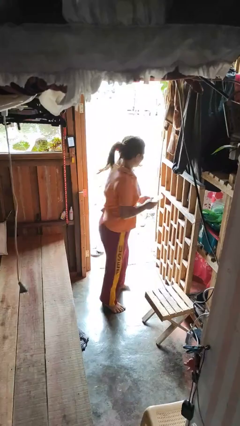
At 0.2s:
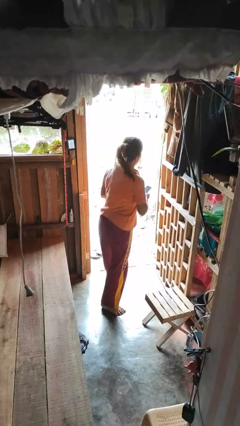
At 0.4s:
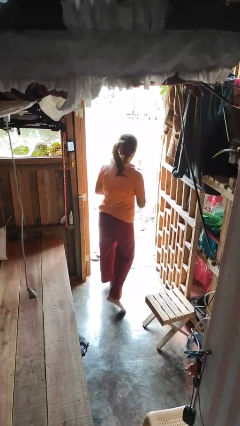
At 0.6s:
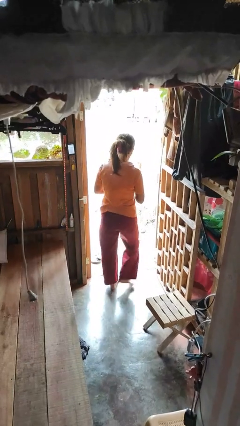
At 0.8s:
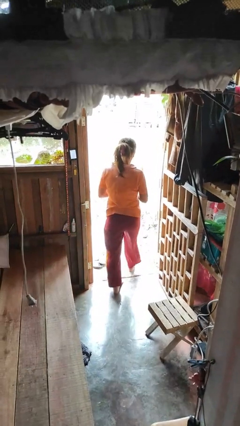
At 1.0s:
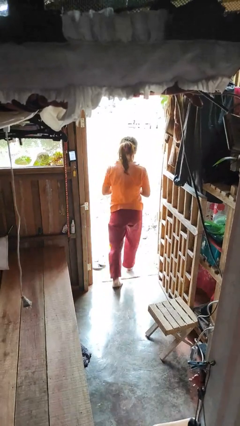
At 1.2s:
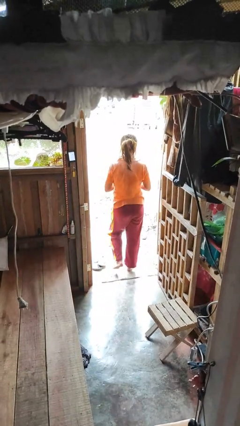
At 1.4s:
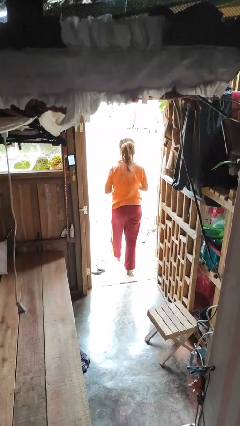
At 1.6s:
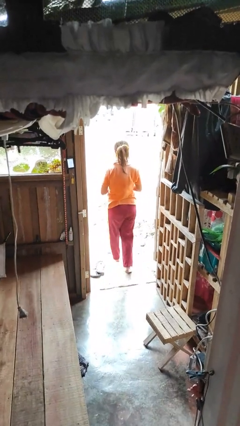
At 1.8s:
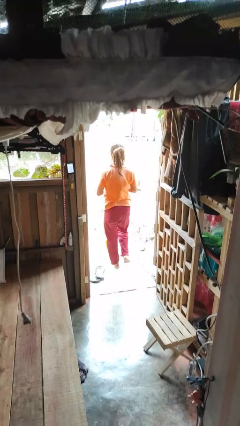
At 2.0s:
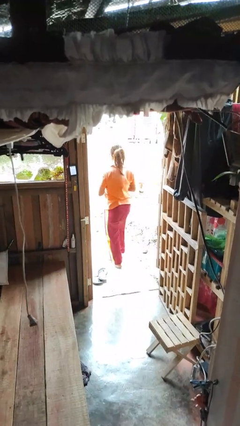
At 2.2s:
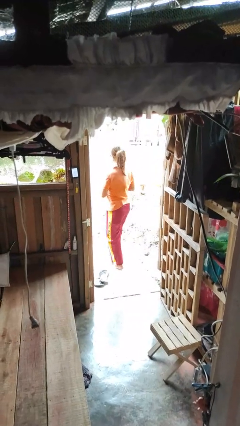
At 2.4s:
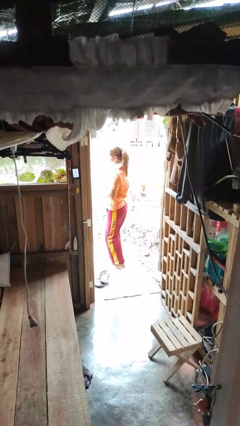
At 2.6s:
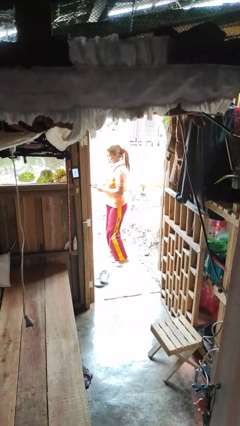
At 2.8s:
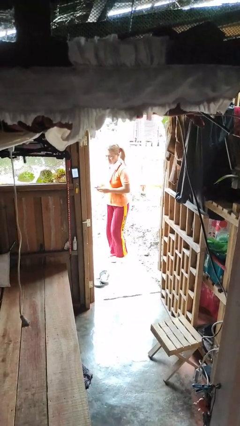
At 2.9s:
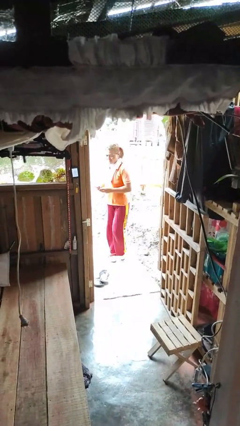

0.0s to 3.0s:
person exits scene through structure

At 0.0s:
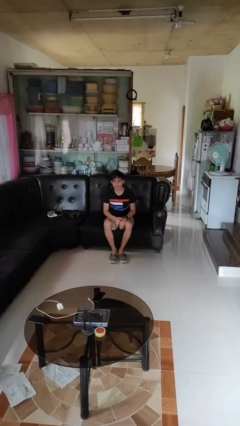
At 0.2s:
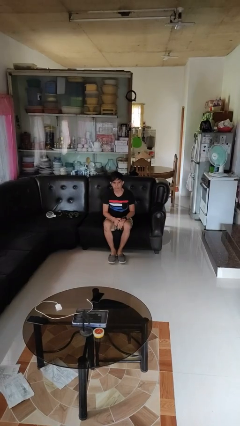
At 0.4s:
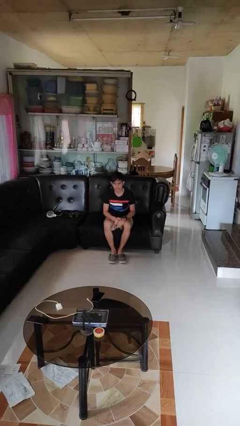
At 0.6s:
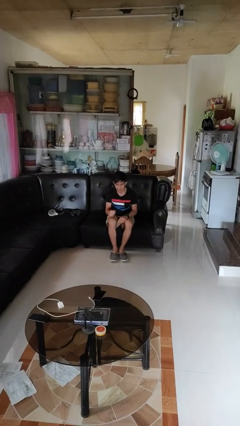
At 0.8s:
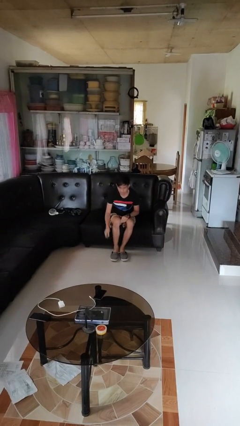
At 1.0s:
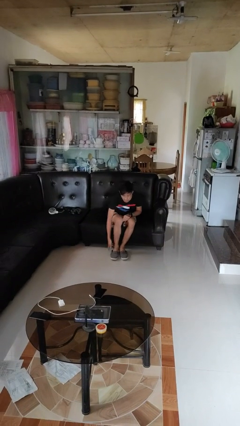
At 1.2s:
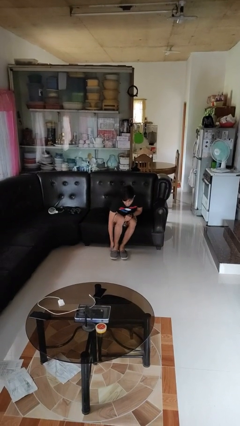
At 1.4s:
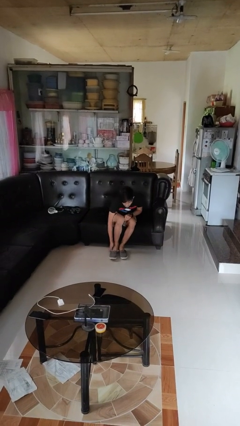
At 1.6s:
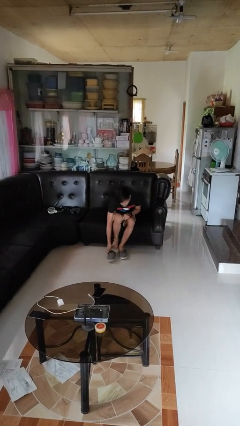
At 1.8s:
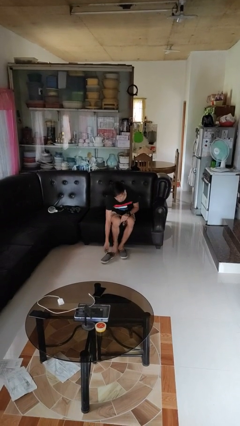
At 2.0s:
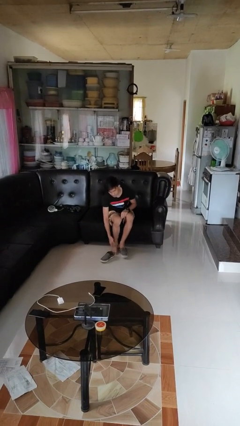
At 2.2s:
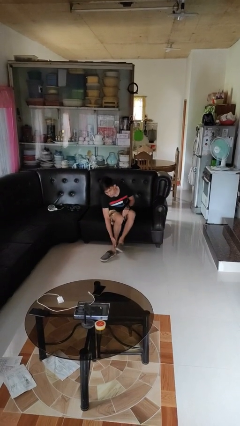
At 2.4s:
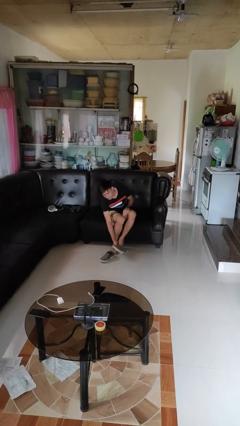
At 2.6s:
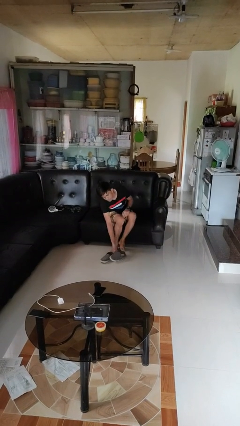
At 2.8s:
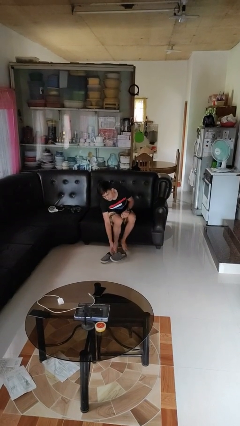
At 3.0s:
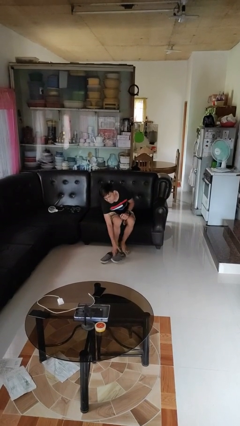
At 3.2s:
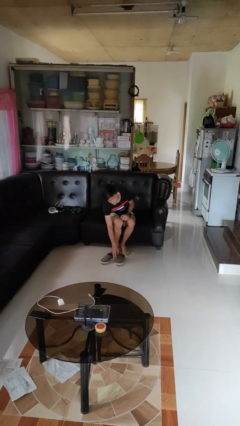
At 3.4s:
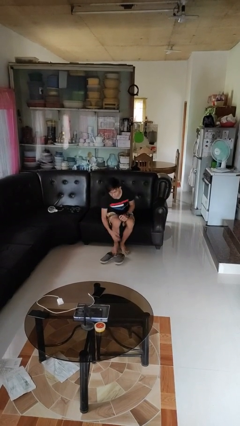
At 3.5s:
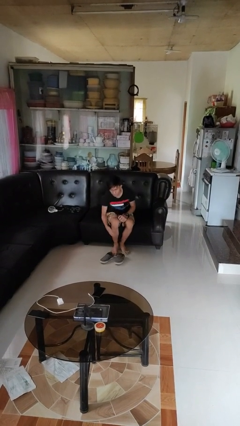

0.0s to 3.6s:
person takes off shoes

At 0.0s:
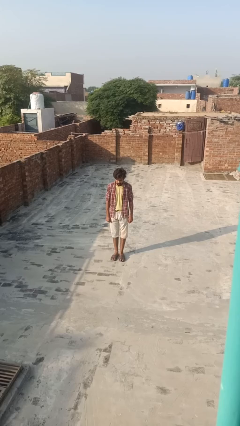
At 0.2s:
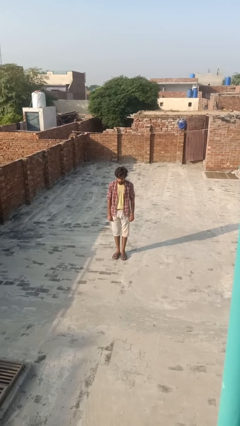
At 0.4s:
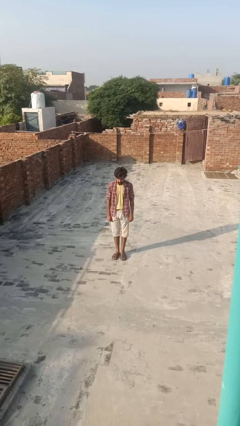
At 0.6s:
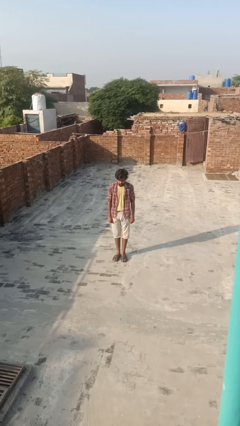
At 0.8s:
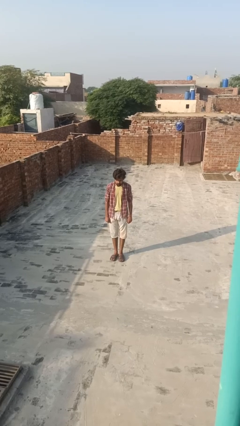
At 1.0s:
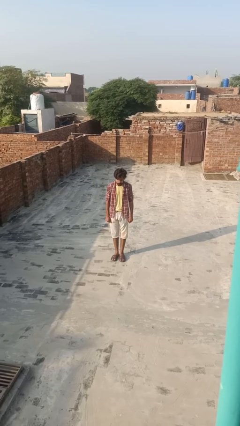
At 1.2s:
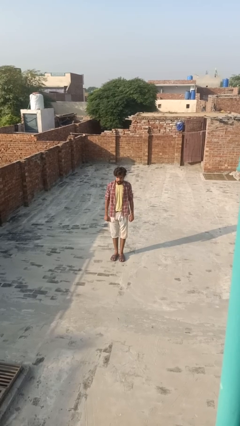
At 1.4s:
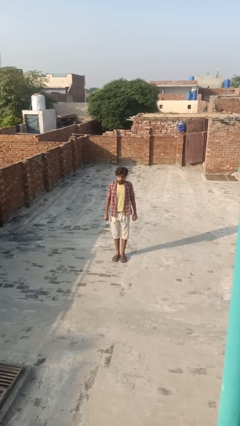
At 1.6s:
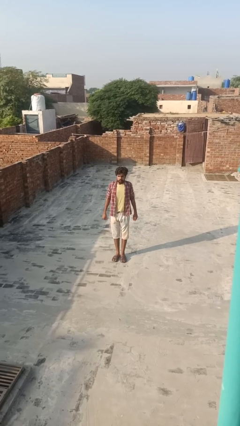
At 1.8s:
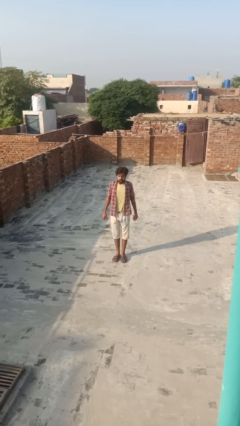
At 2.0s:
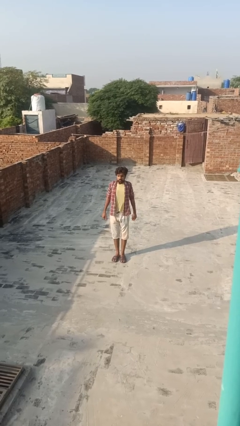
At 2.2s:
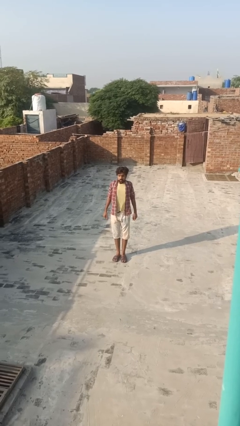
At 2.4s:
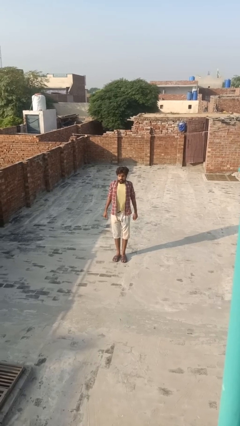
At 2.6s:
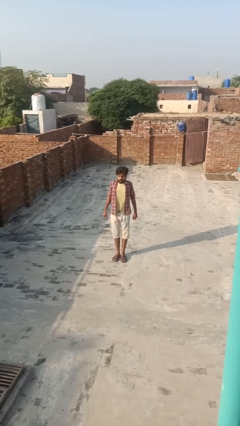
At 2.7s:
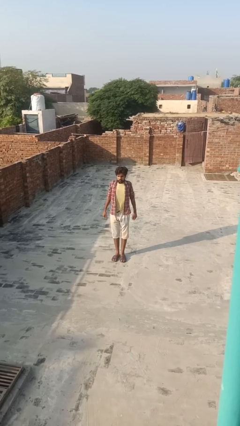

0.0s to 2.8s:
person exercises with lunges

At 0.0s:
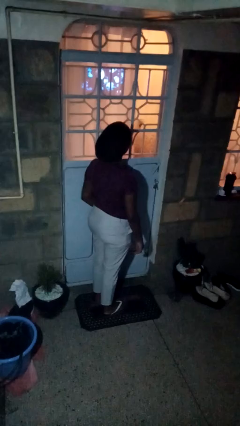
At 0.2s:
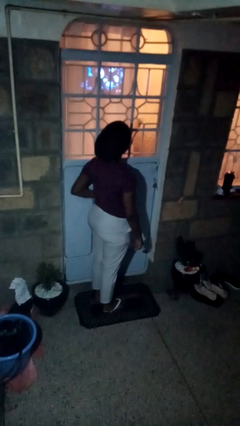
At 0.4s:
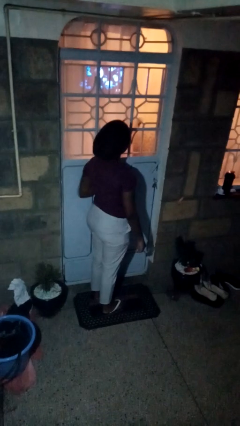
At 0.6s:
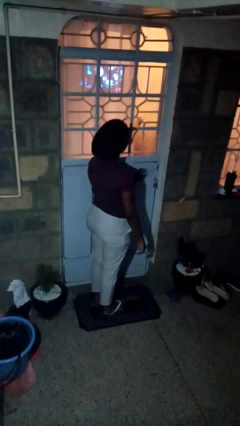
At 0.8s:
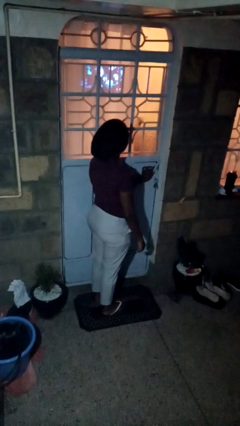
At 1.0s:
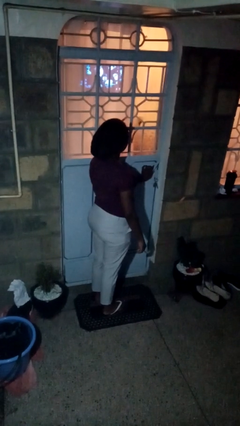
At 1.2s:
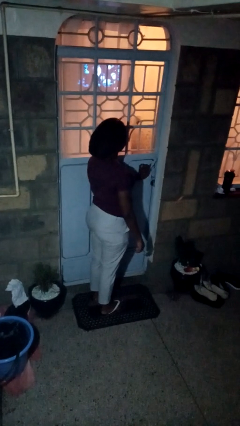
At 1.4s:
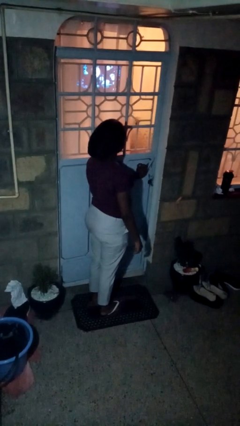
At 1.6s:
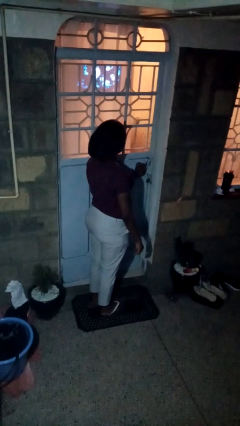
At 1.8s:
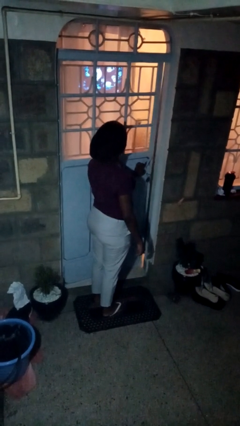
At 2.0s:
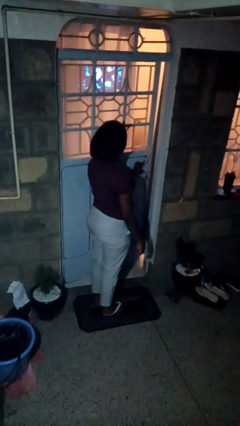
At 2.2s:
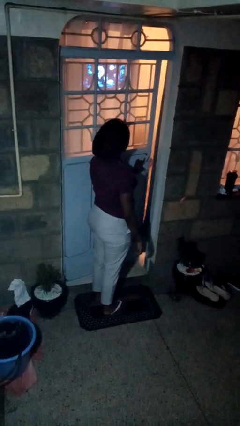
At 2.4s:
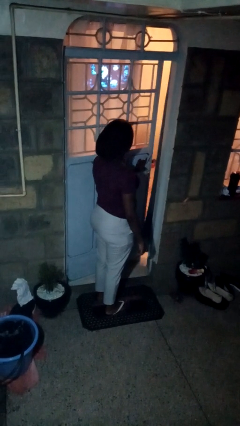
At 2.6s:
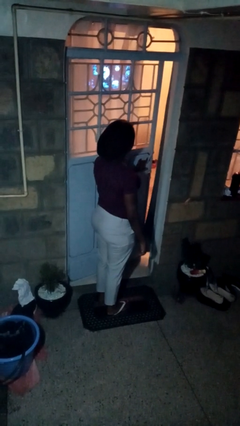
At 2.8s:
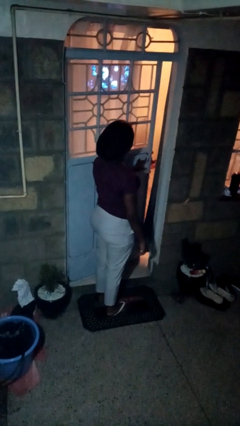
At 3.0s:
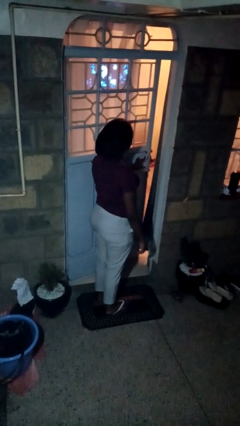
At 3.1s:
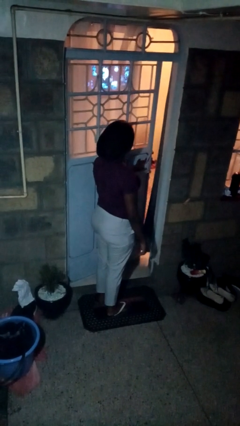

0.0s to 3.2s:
person opens facility door

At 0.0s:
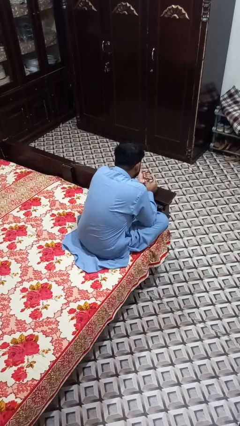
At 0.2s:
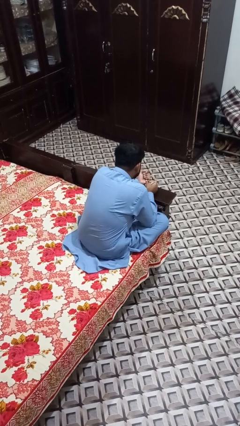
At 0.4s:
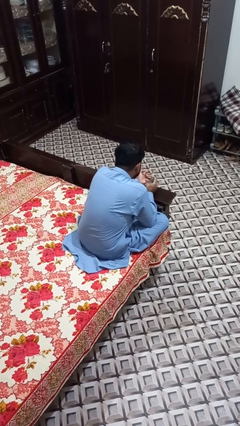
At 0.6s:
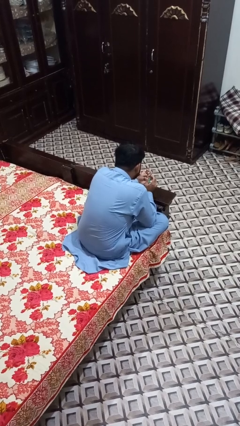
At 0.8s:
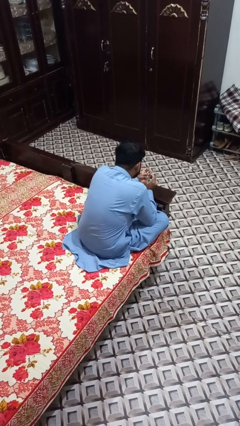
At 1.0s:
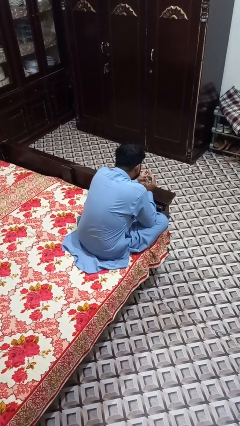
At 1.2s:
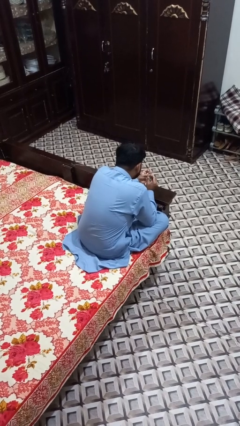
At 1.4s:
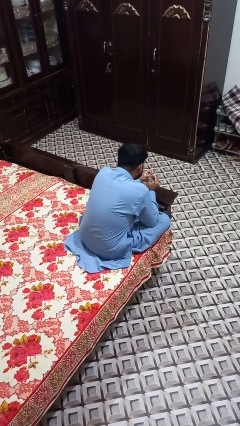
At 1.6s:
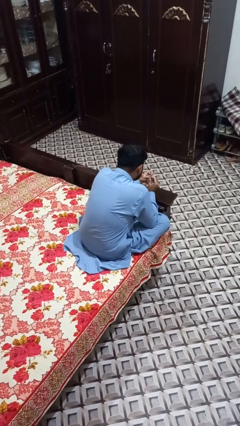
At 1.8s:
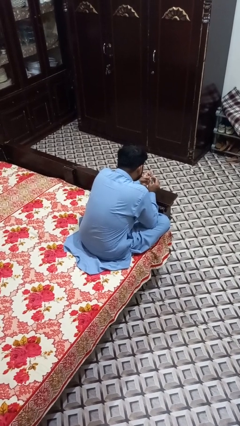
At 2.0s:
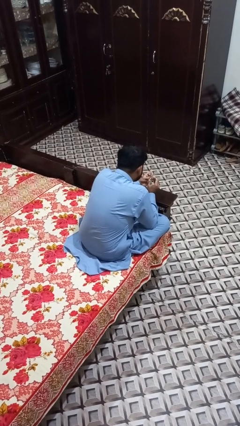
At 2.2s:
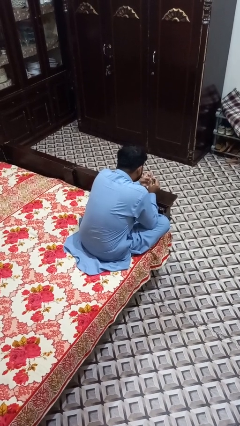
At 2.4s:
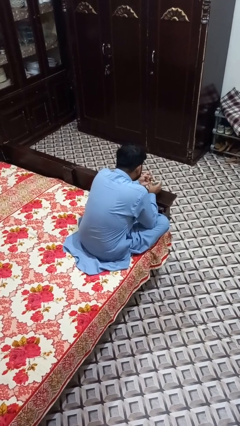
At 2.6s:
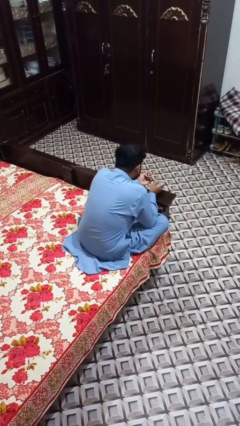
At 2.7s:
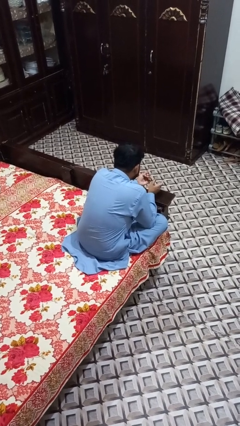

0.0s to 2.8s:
person clips fingernails

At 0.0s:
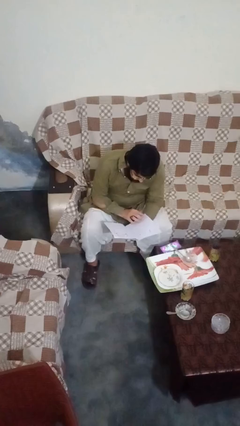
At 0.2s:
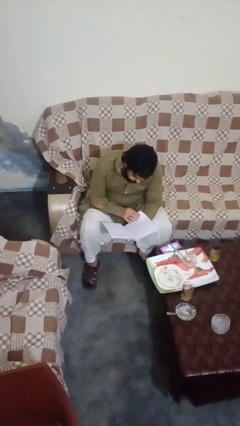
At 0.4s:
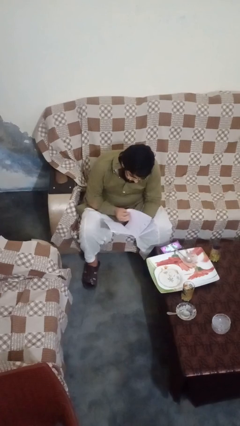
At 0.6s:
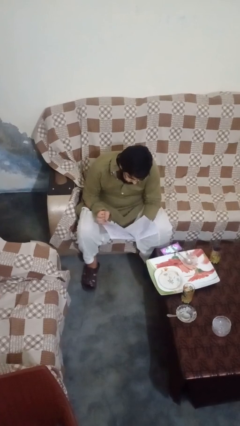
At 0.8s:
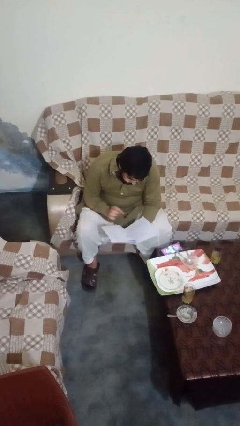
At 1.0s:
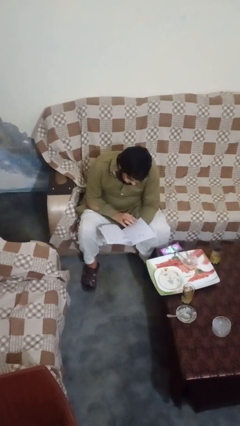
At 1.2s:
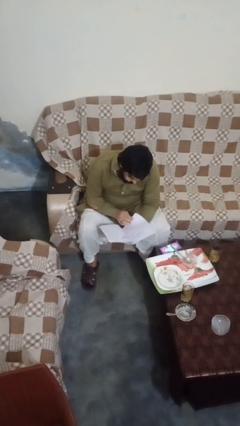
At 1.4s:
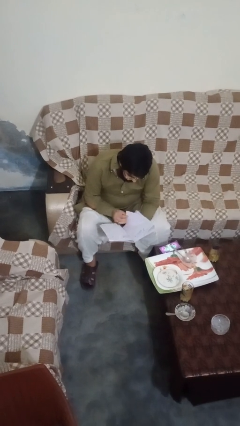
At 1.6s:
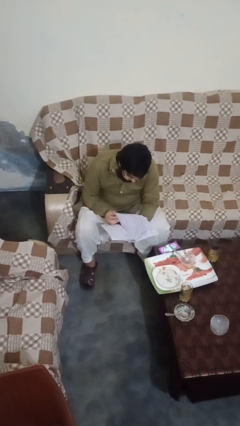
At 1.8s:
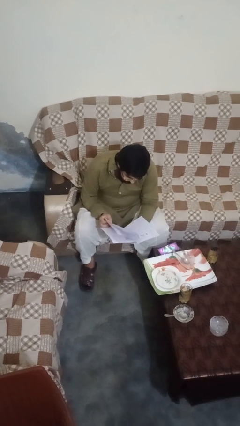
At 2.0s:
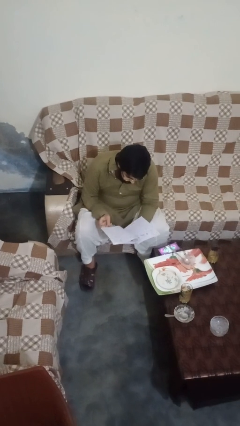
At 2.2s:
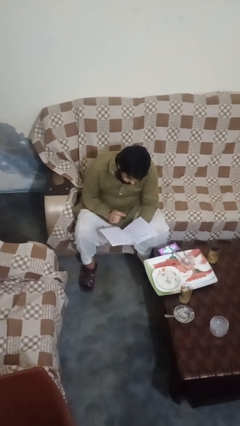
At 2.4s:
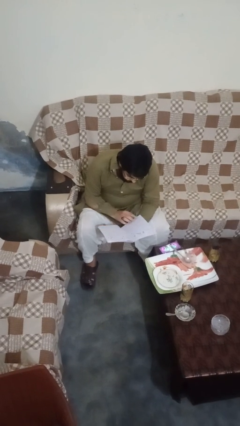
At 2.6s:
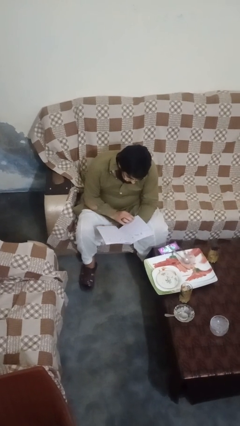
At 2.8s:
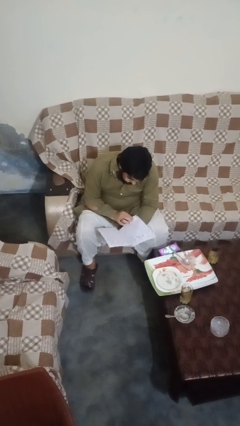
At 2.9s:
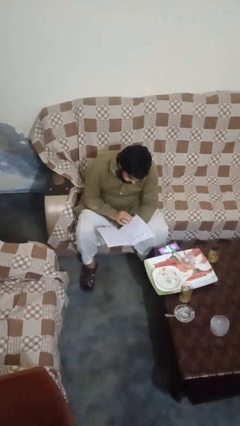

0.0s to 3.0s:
person reads book
